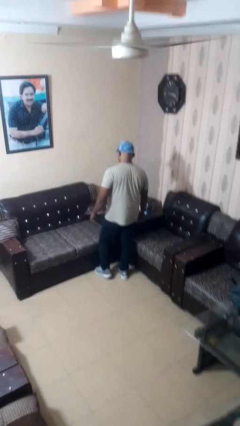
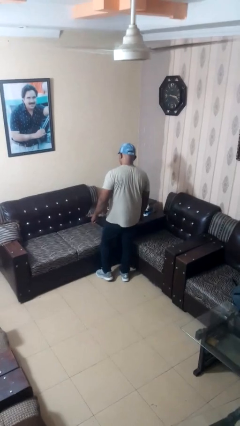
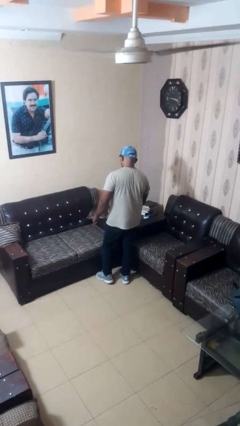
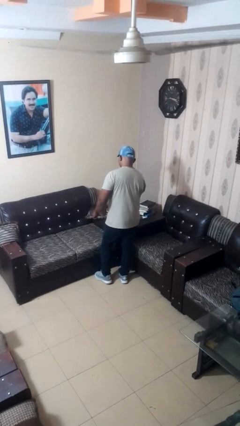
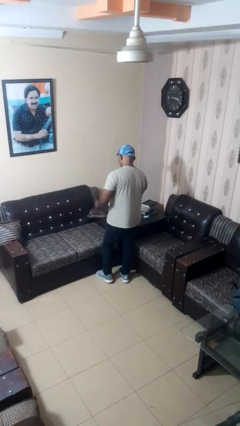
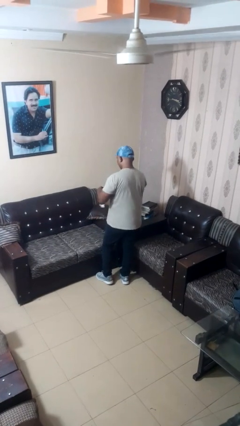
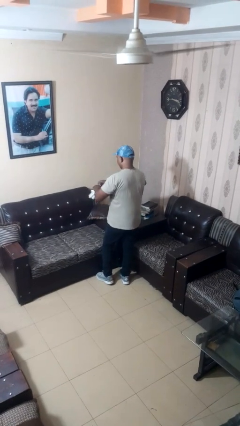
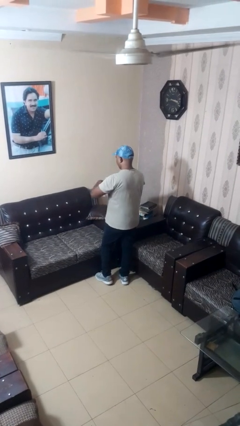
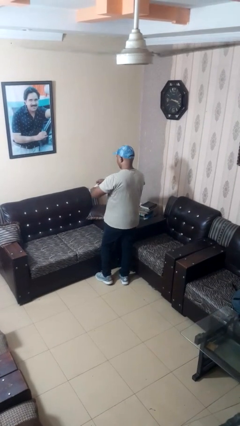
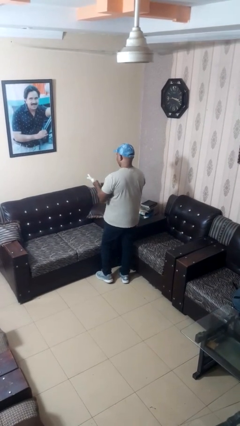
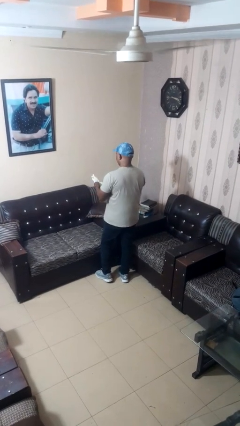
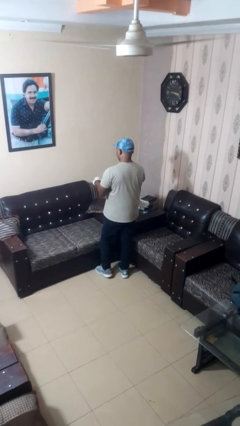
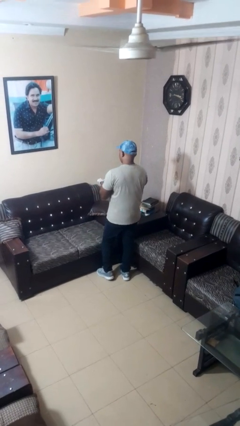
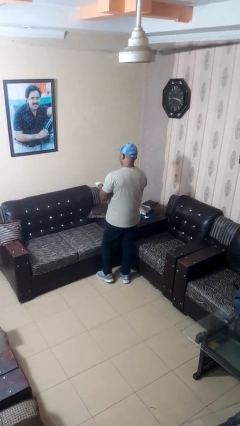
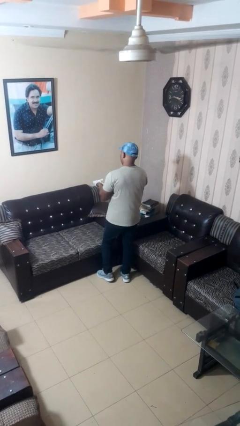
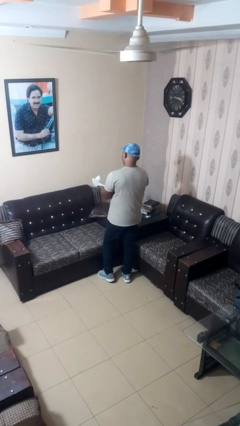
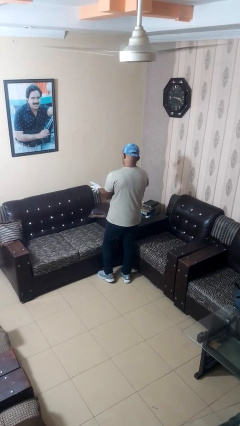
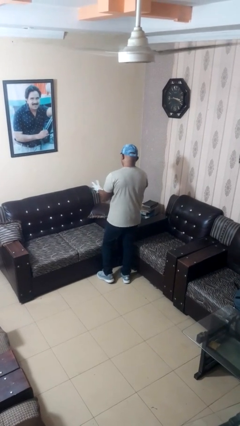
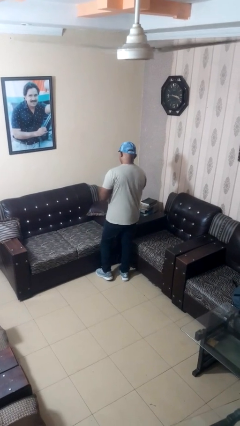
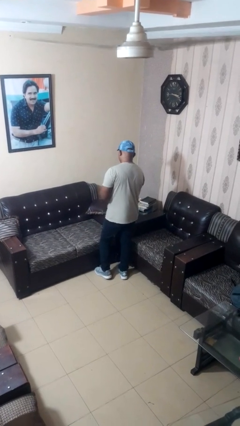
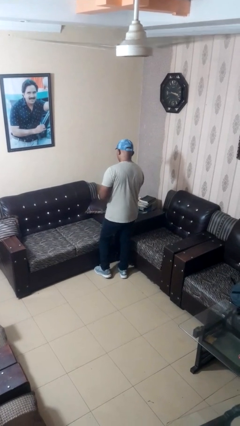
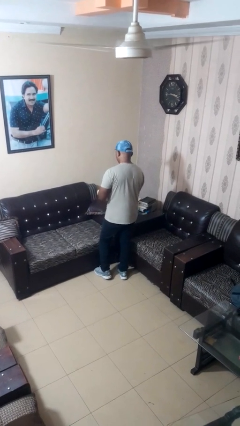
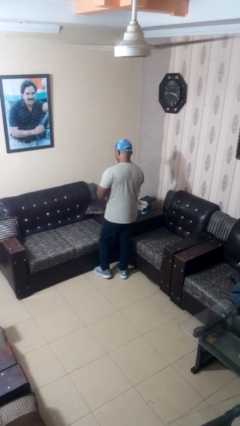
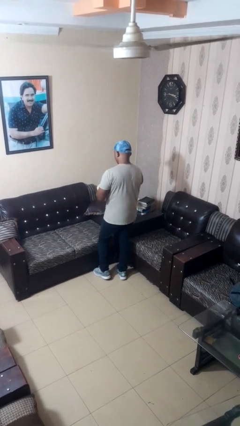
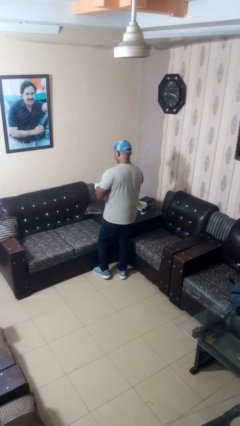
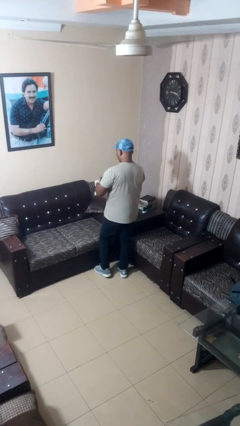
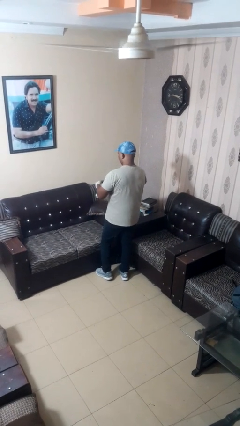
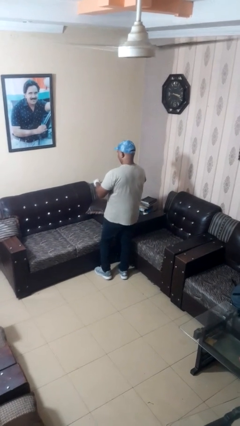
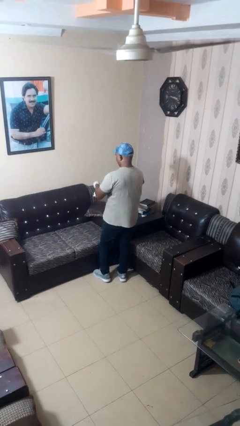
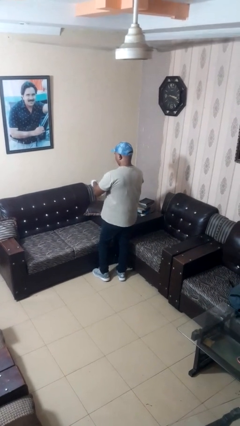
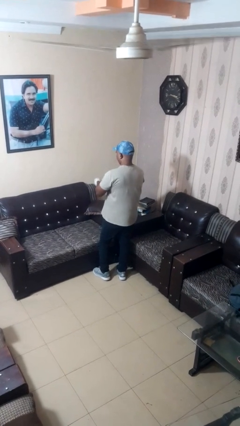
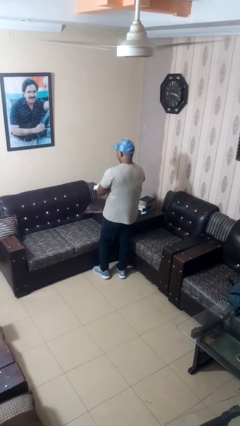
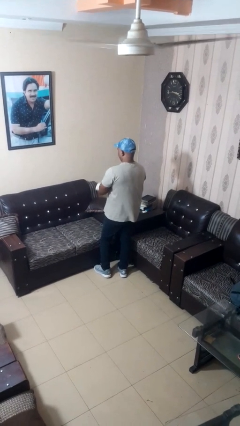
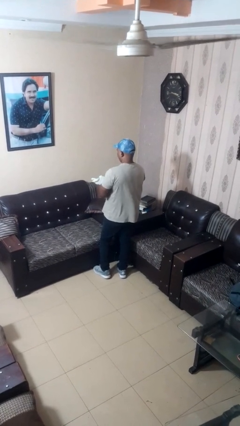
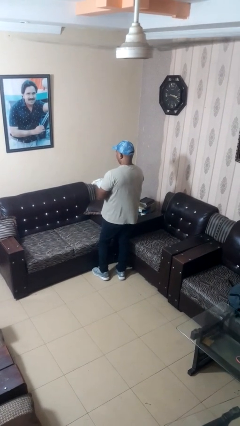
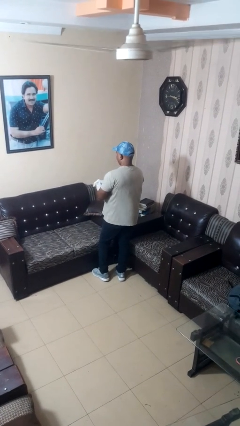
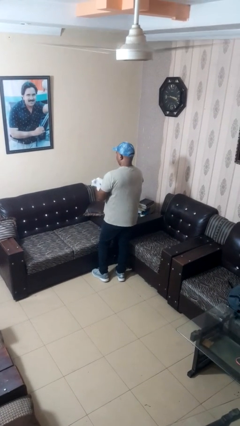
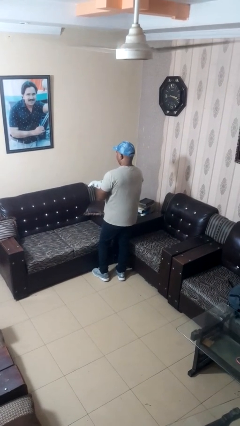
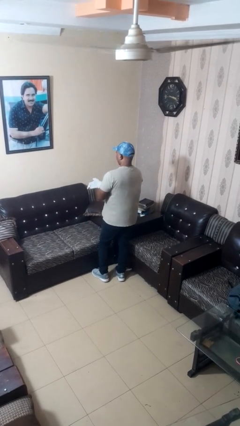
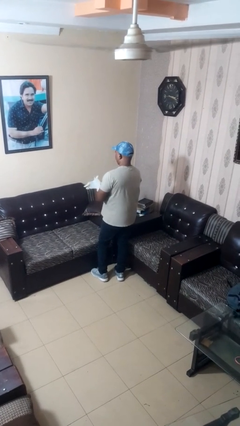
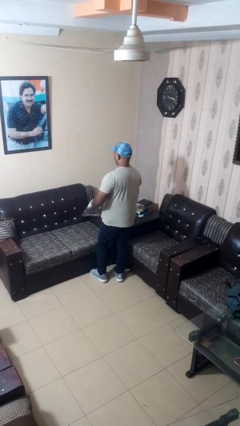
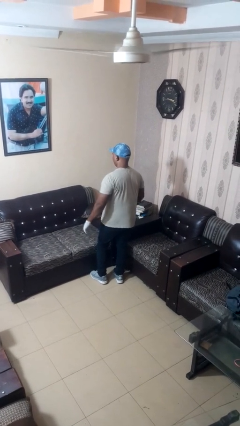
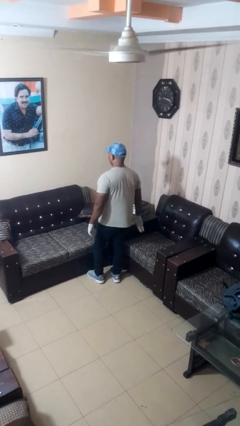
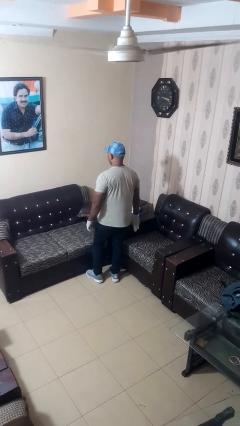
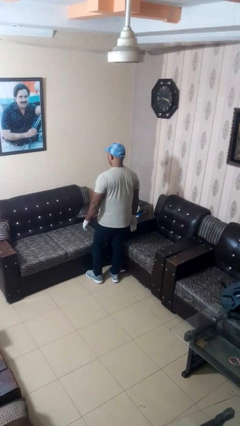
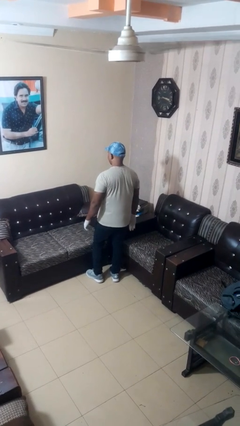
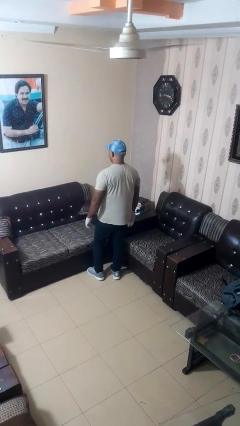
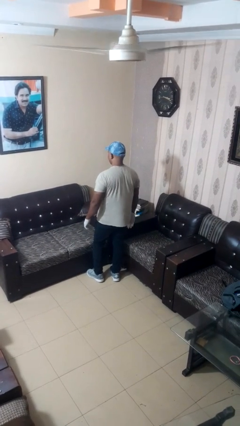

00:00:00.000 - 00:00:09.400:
person puts on gloves

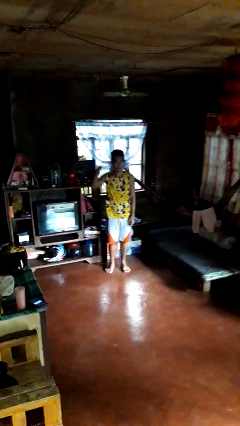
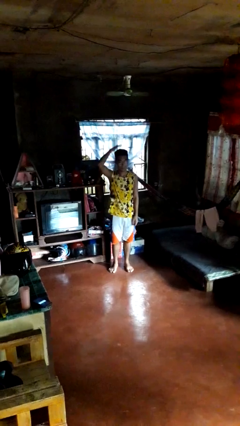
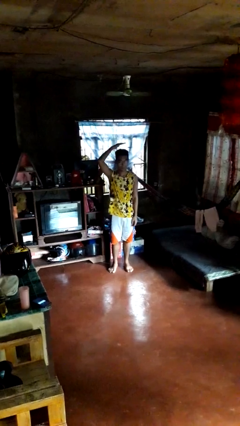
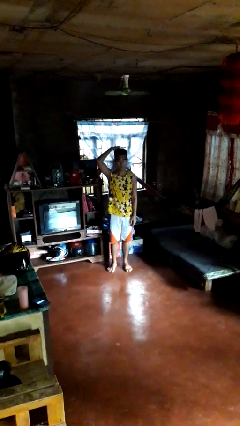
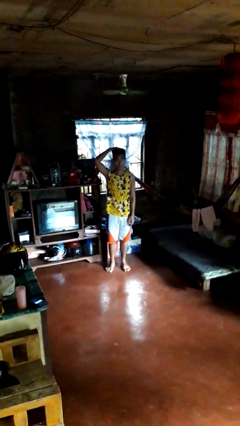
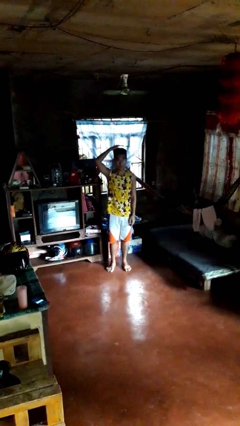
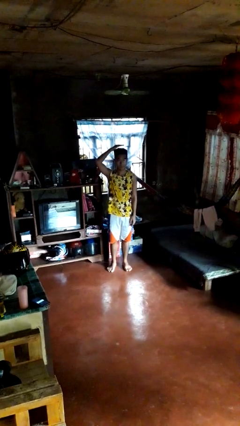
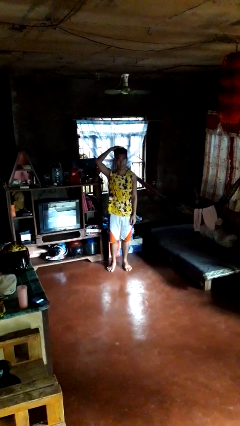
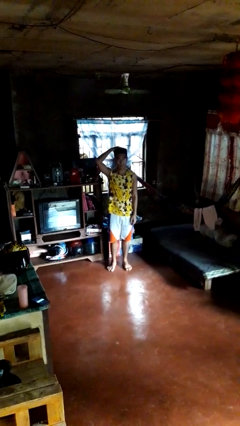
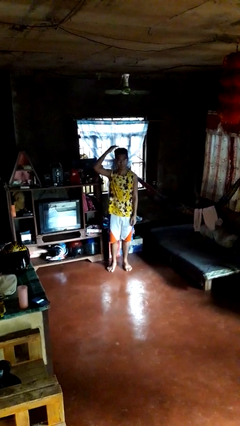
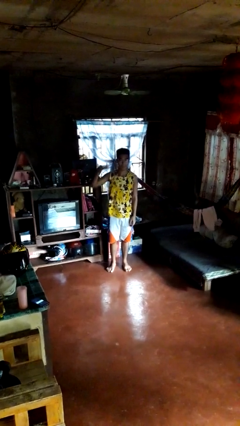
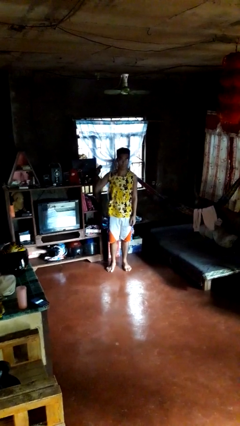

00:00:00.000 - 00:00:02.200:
person pats head

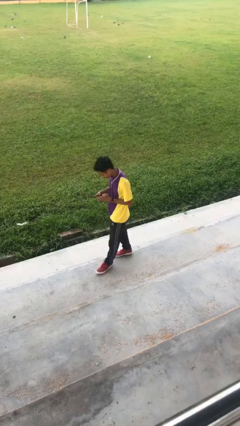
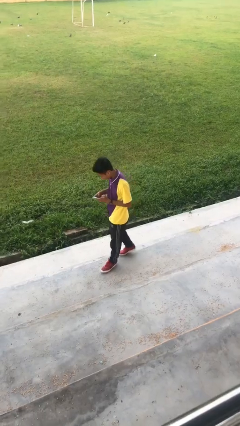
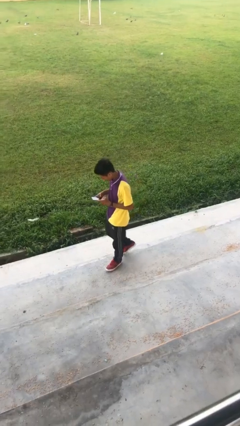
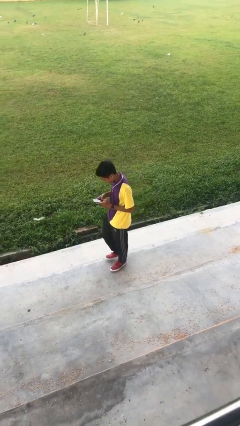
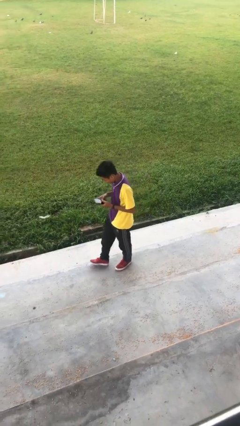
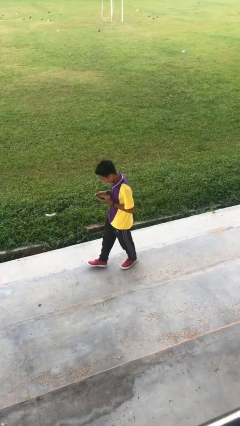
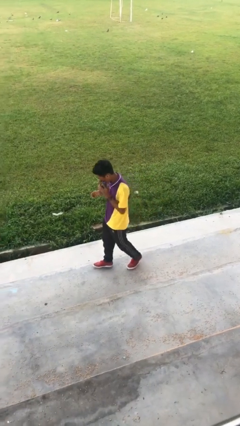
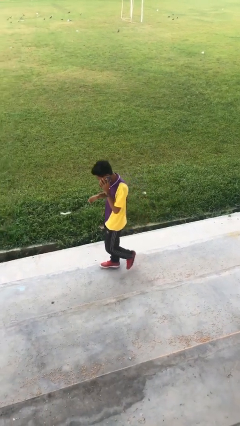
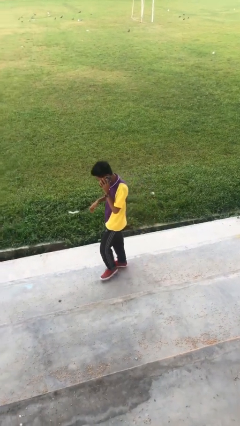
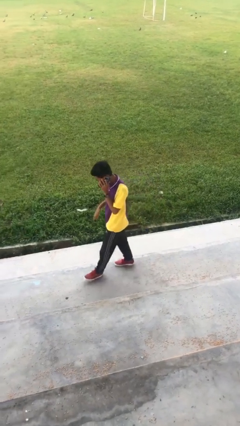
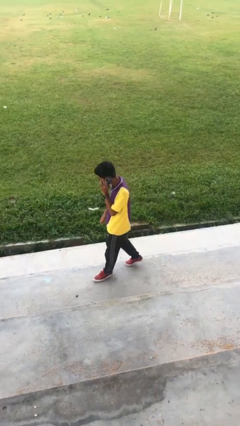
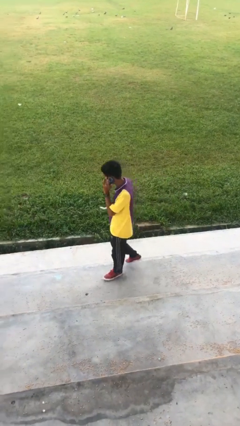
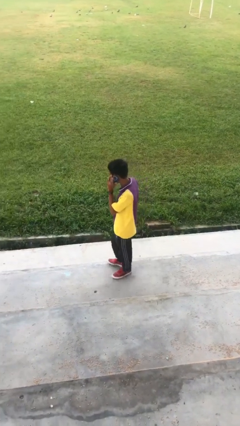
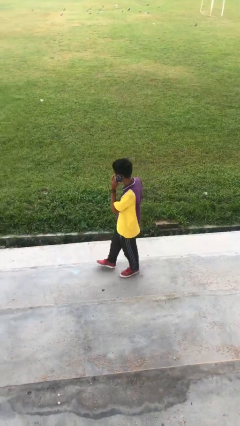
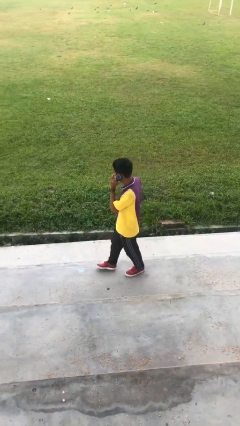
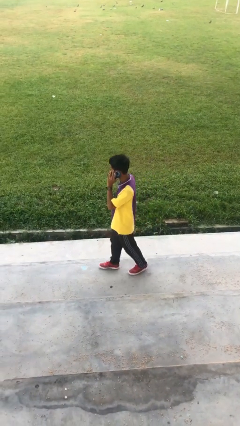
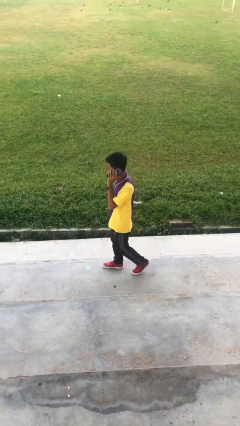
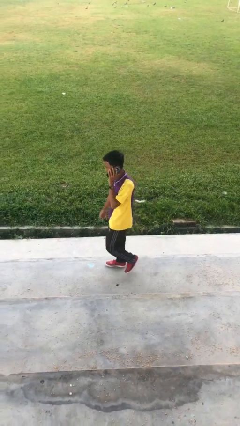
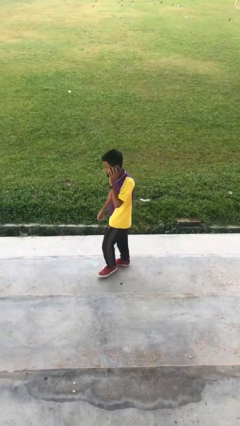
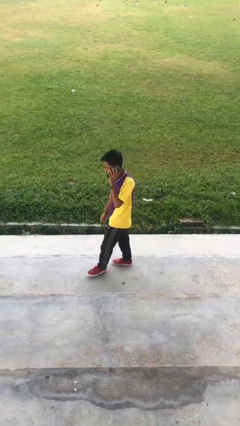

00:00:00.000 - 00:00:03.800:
person talks on phone

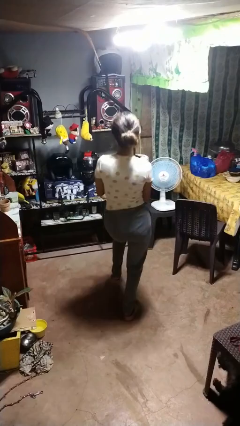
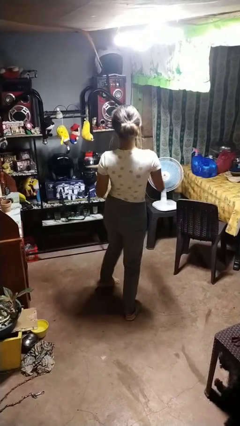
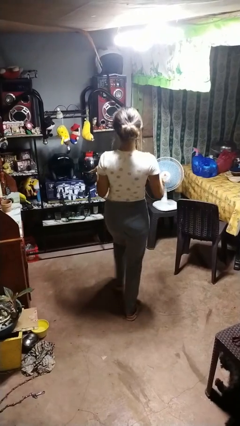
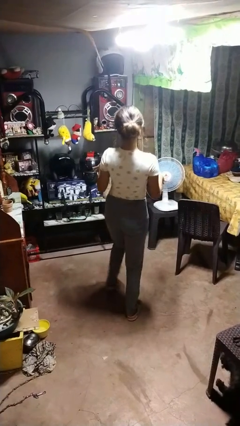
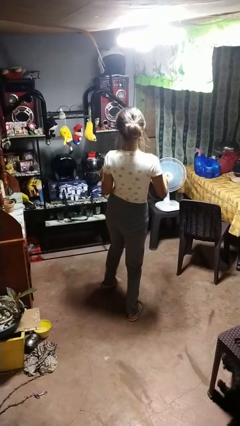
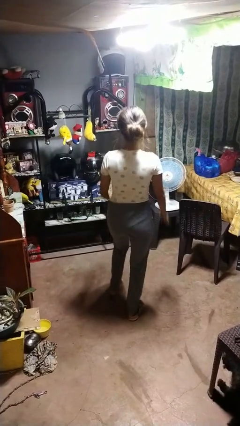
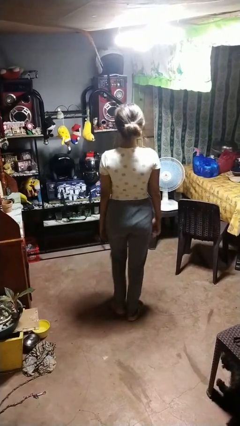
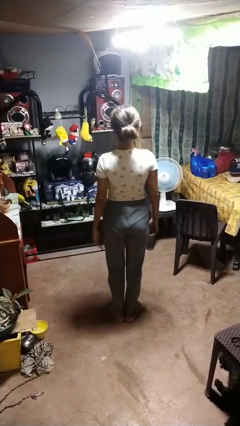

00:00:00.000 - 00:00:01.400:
person dances in place

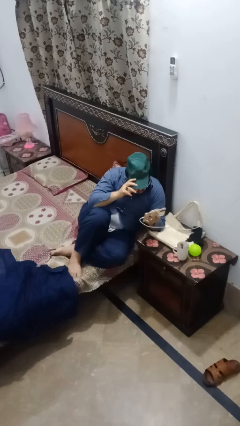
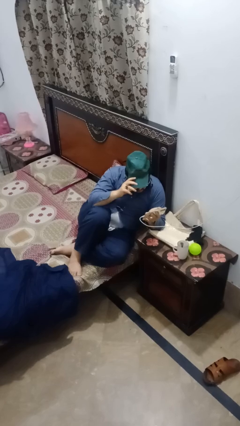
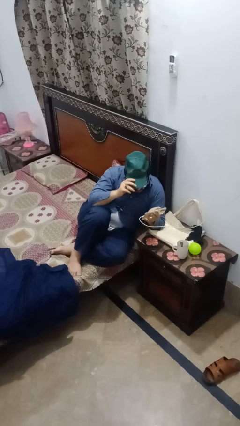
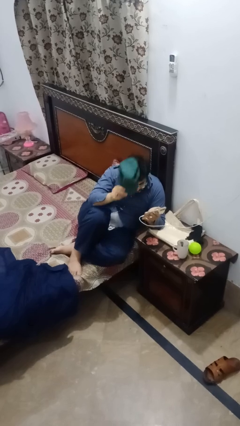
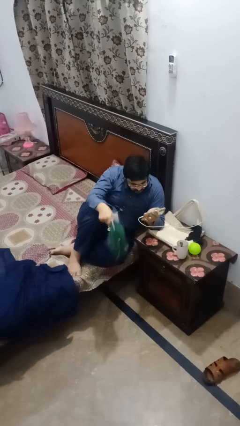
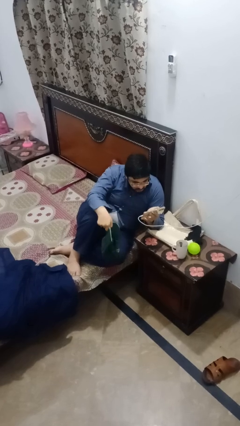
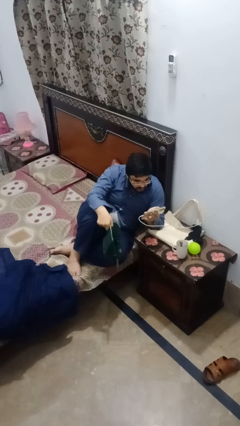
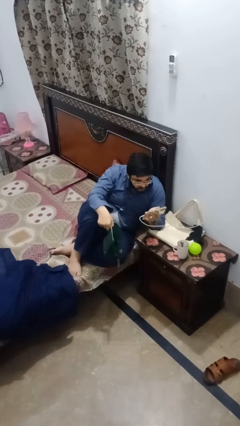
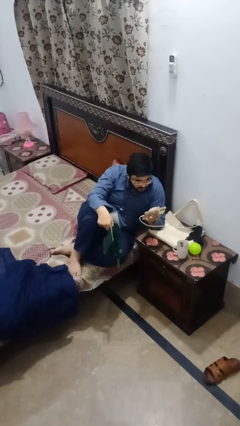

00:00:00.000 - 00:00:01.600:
person takes off hat
